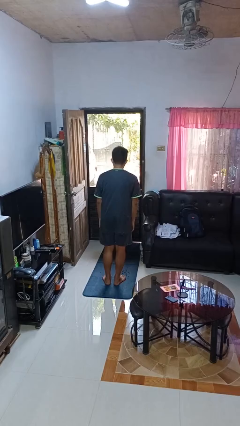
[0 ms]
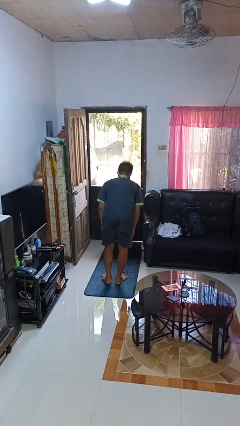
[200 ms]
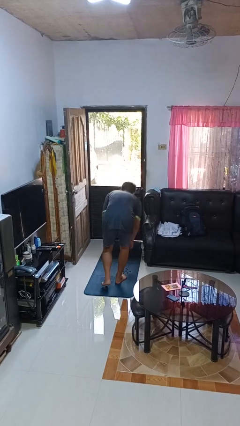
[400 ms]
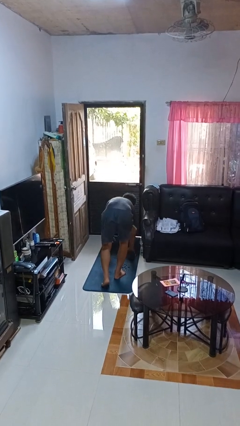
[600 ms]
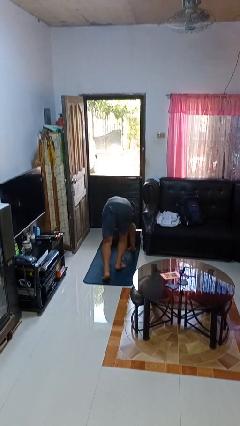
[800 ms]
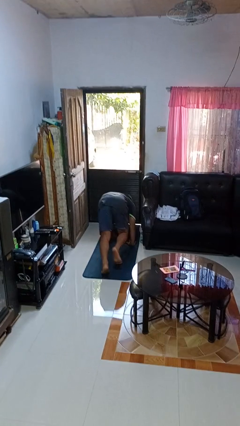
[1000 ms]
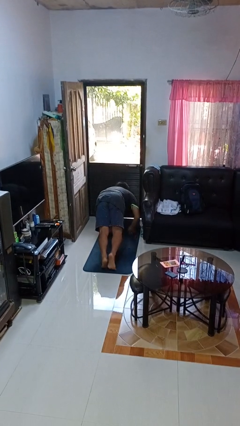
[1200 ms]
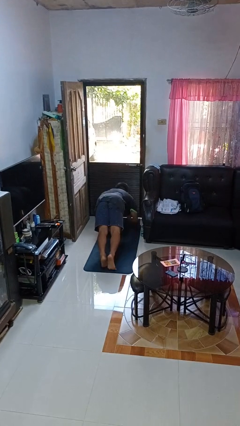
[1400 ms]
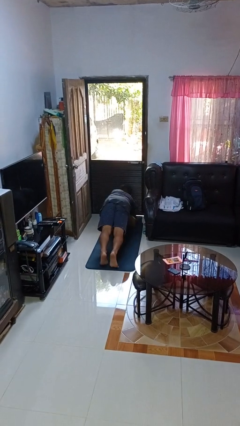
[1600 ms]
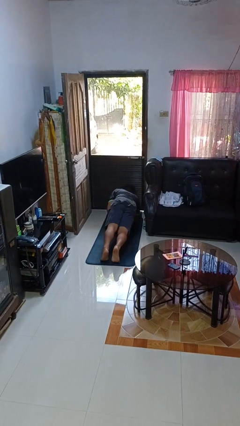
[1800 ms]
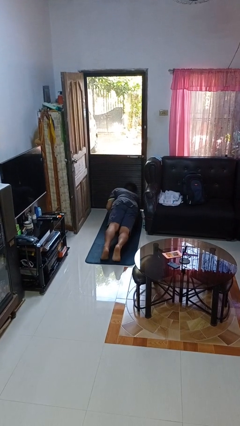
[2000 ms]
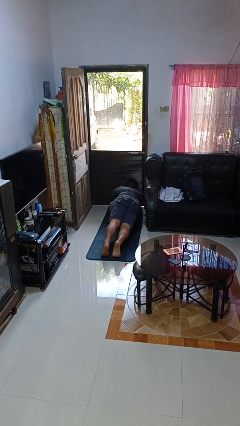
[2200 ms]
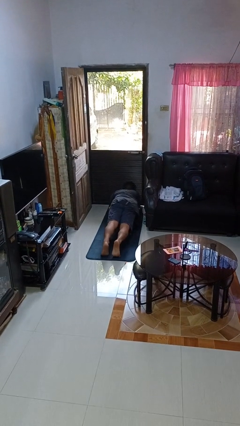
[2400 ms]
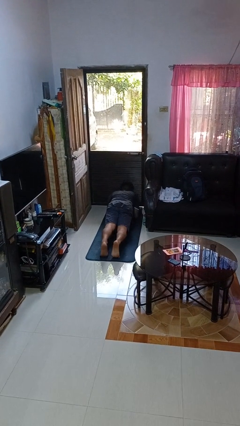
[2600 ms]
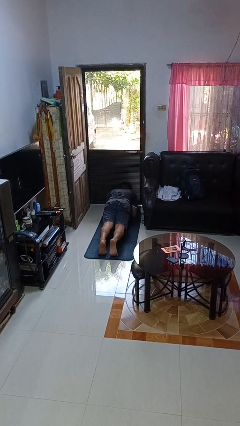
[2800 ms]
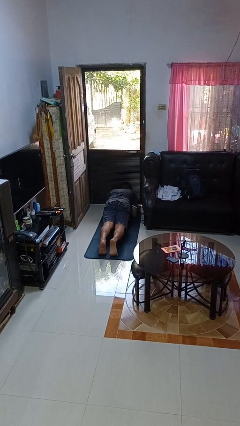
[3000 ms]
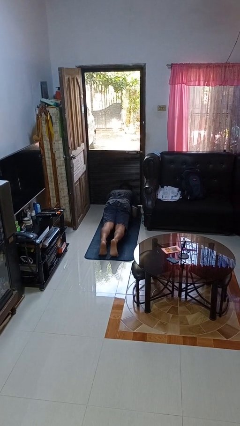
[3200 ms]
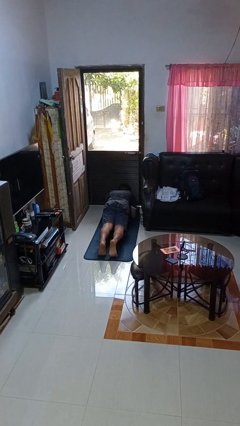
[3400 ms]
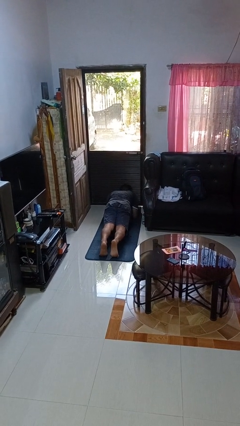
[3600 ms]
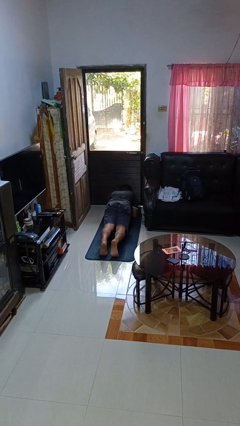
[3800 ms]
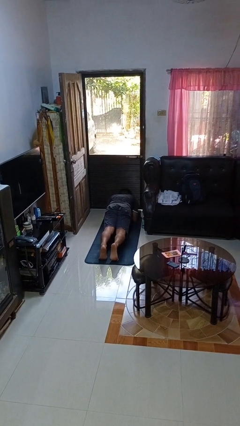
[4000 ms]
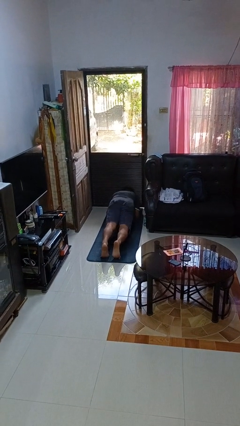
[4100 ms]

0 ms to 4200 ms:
person exercises with plank

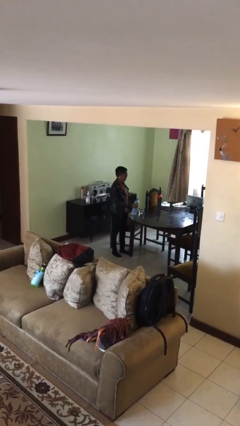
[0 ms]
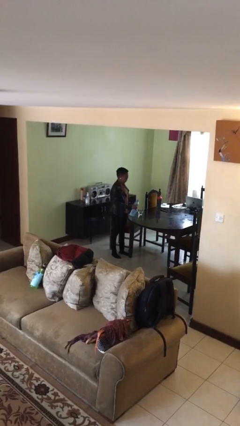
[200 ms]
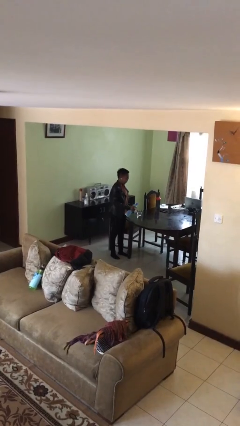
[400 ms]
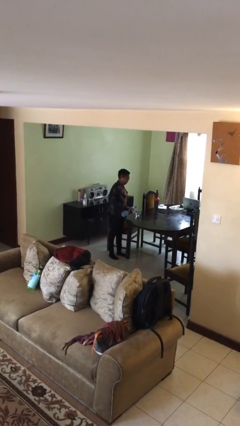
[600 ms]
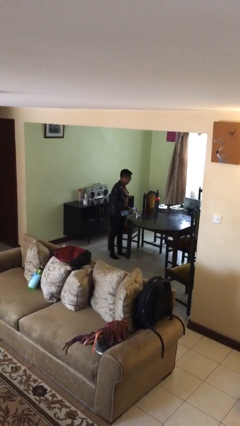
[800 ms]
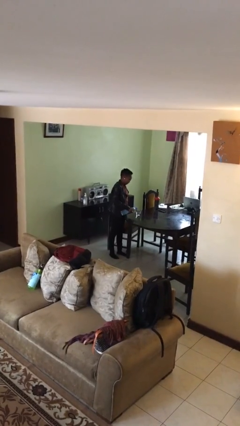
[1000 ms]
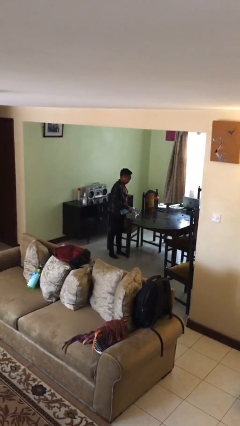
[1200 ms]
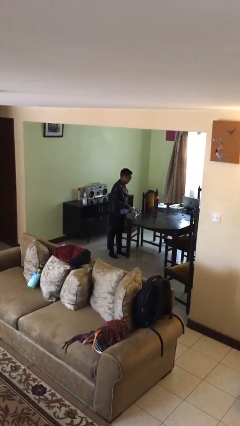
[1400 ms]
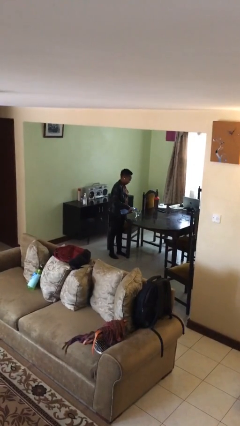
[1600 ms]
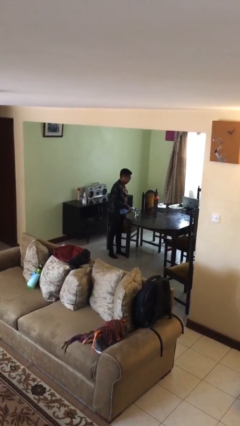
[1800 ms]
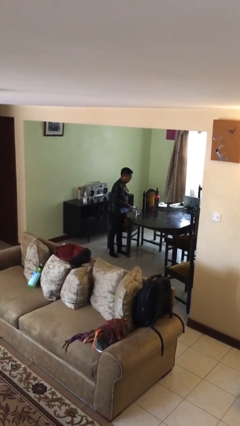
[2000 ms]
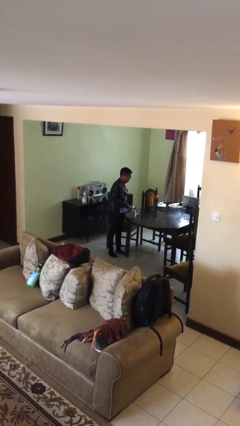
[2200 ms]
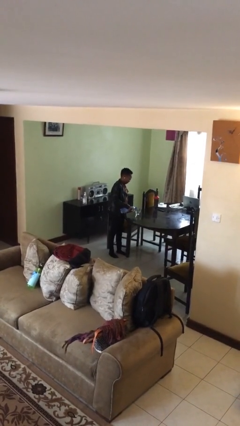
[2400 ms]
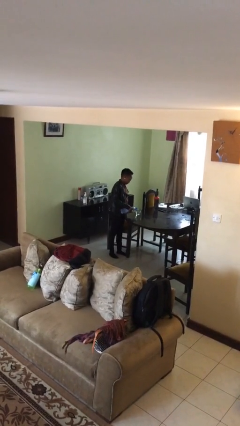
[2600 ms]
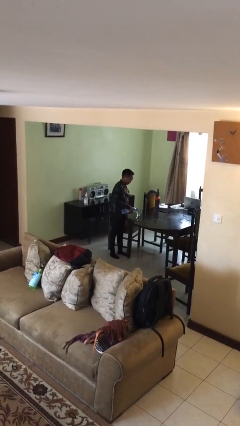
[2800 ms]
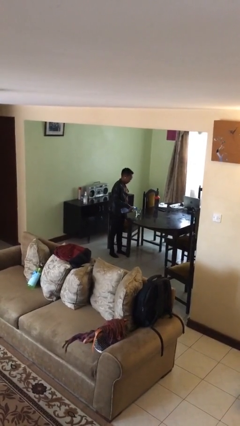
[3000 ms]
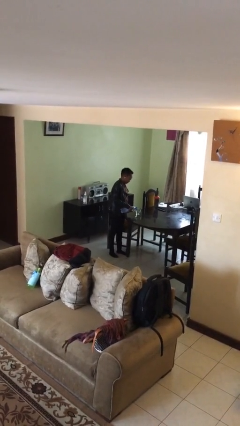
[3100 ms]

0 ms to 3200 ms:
person pours liquid into cup

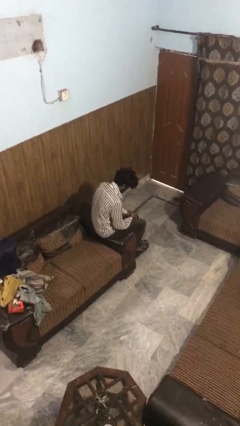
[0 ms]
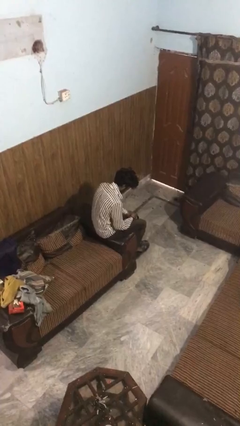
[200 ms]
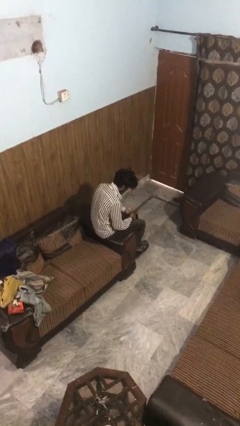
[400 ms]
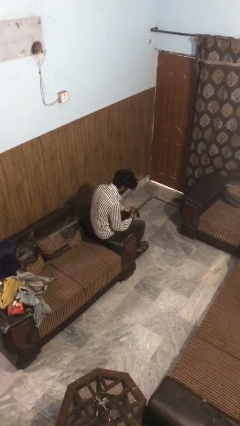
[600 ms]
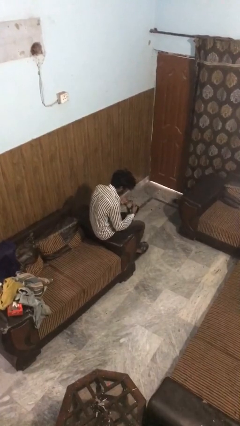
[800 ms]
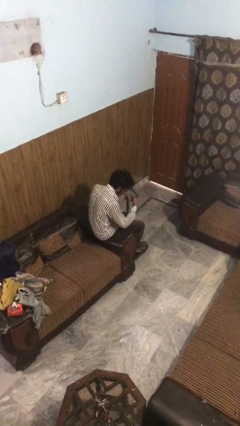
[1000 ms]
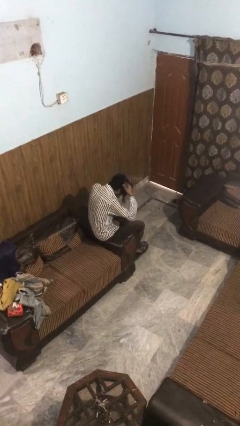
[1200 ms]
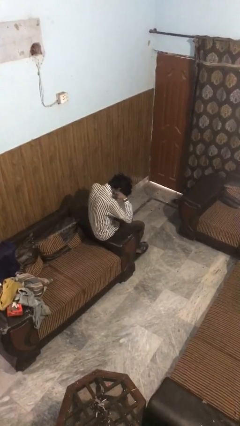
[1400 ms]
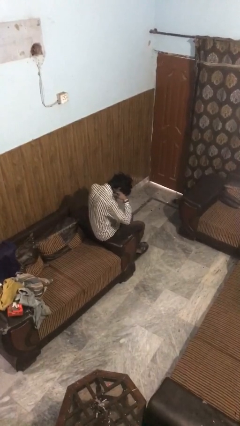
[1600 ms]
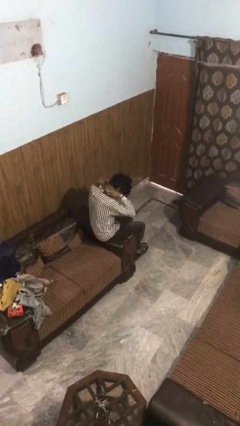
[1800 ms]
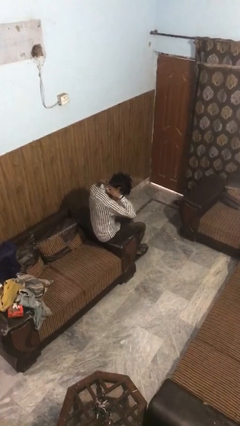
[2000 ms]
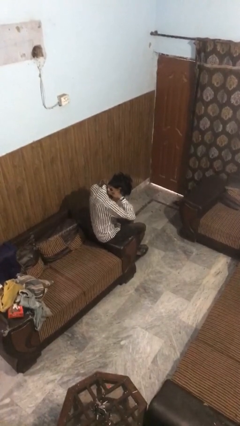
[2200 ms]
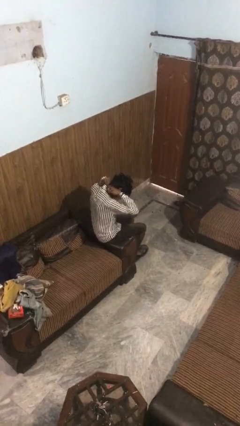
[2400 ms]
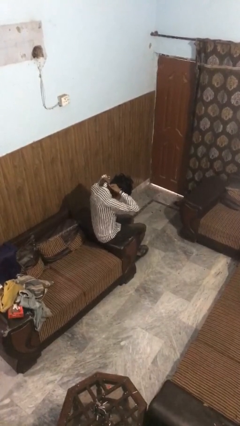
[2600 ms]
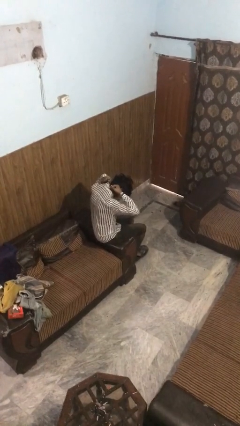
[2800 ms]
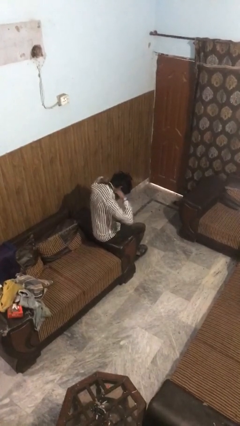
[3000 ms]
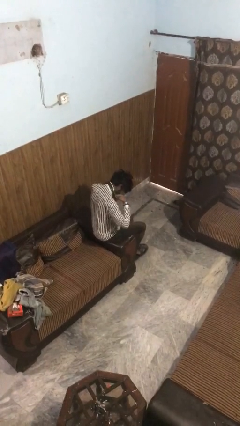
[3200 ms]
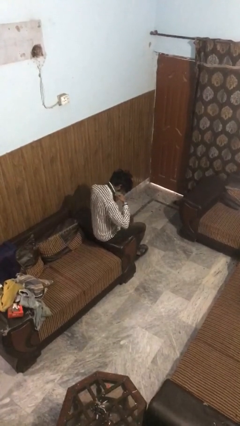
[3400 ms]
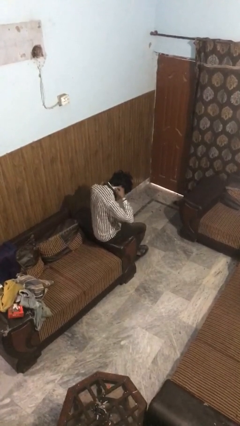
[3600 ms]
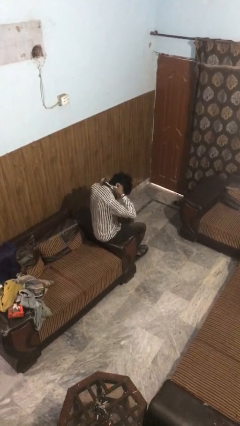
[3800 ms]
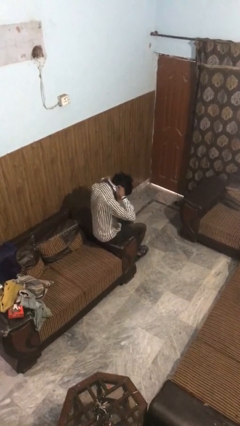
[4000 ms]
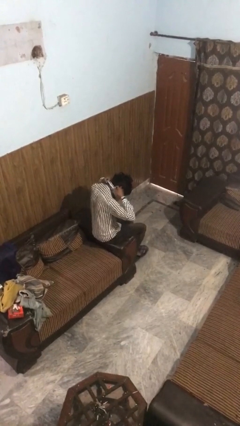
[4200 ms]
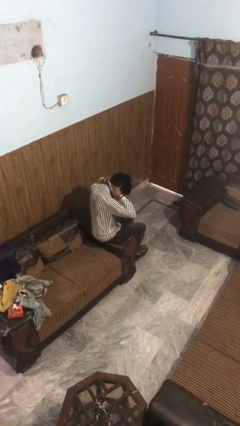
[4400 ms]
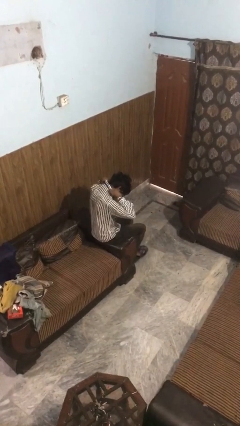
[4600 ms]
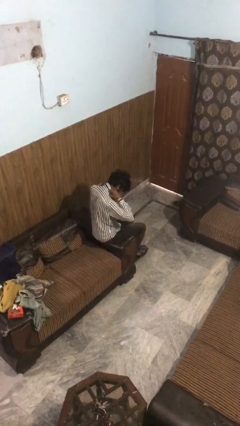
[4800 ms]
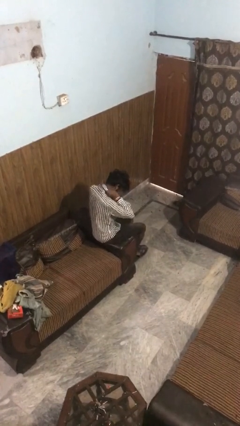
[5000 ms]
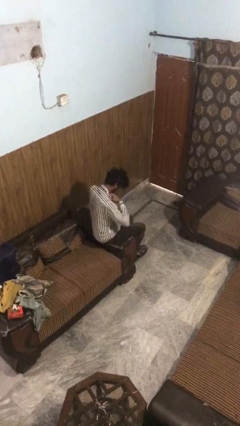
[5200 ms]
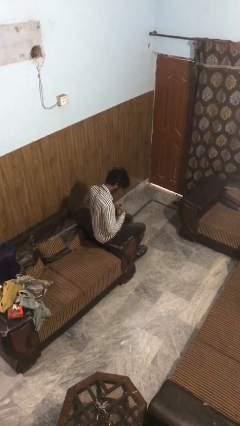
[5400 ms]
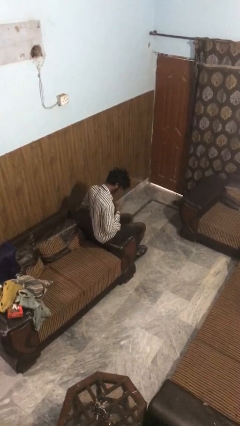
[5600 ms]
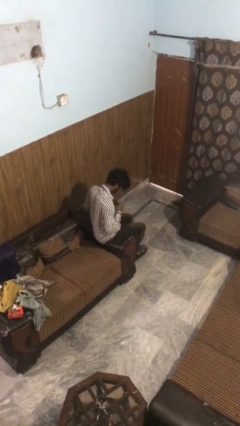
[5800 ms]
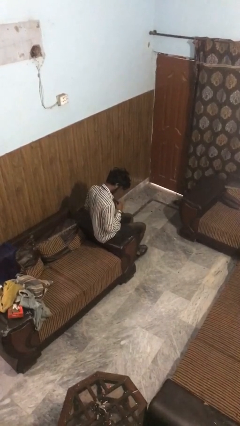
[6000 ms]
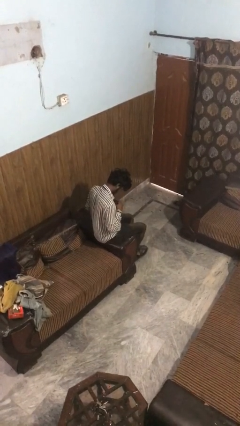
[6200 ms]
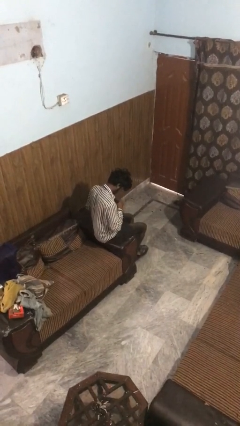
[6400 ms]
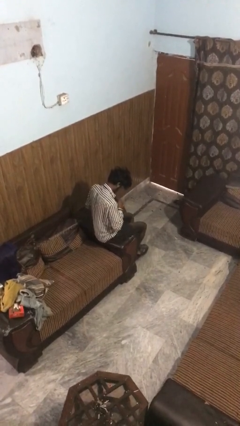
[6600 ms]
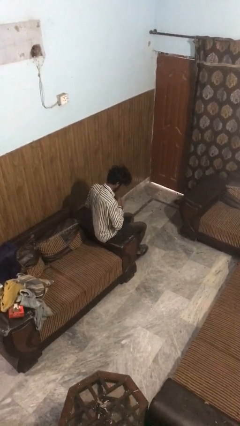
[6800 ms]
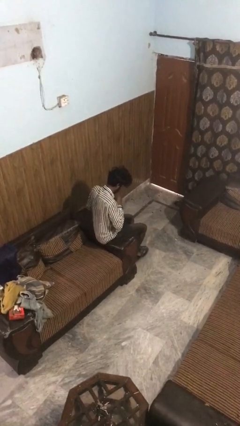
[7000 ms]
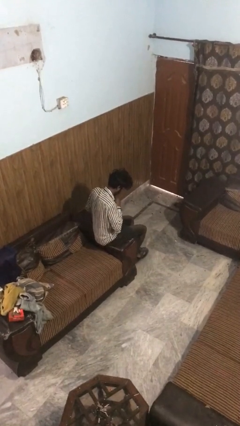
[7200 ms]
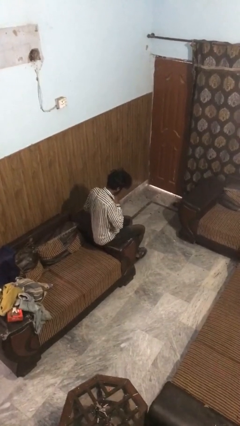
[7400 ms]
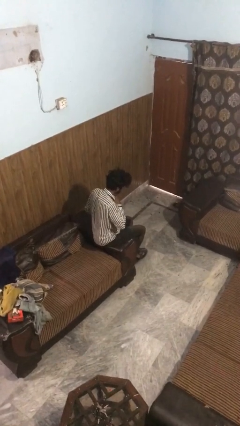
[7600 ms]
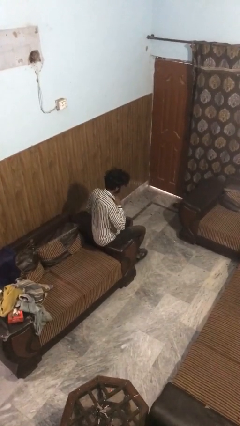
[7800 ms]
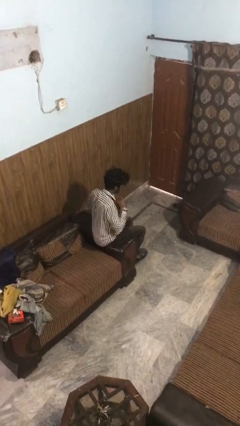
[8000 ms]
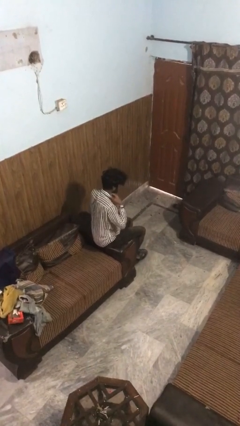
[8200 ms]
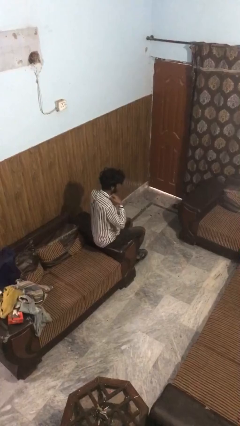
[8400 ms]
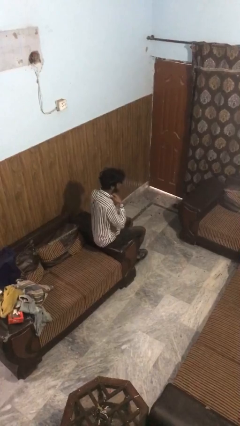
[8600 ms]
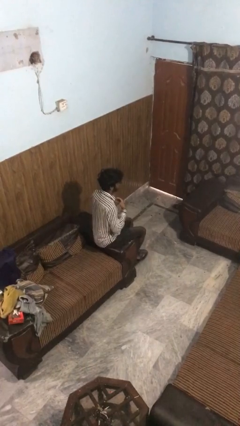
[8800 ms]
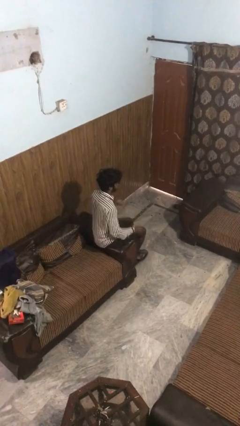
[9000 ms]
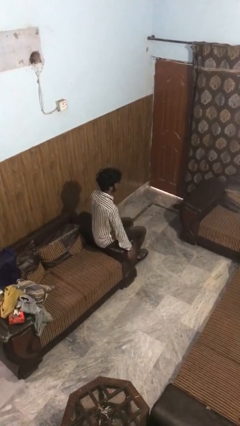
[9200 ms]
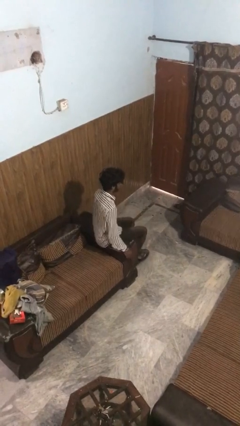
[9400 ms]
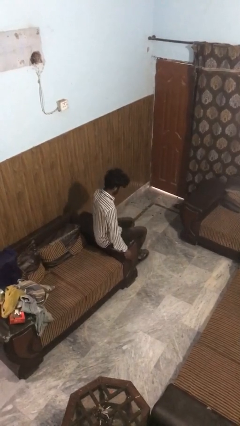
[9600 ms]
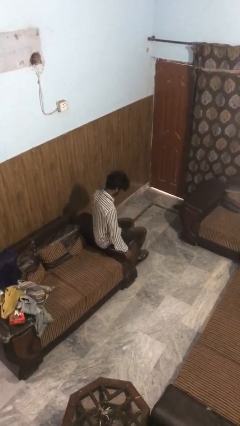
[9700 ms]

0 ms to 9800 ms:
person puts on necktie

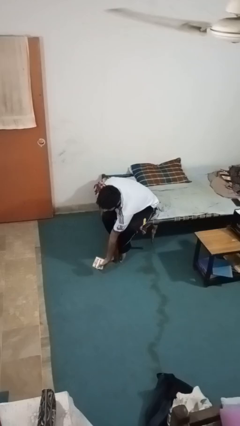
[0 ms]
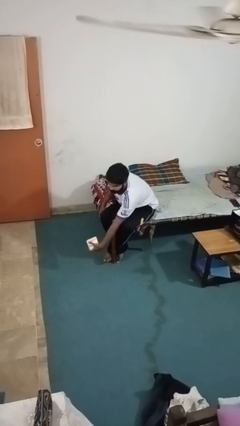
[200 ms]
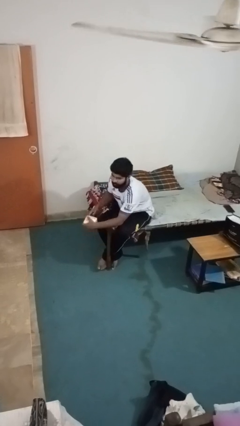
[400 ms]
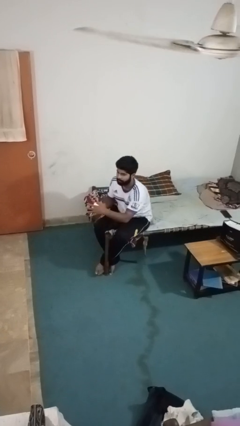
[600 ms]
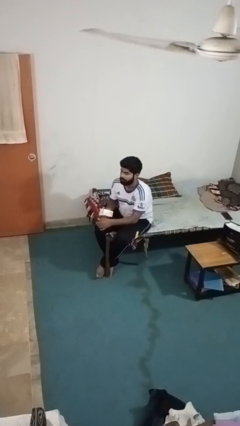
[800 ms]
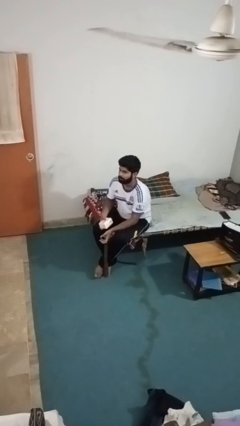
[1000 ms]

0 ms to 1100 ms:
person catches dropped object
